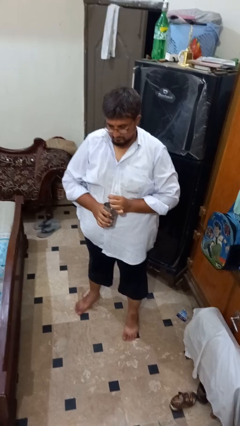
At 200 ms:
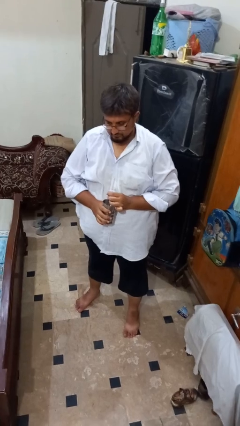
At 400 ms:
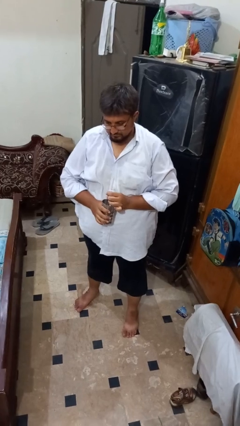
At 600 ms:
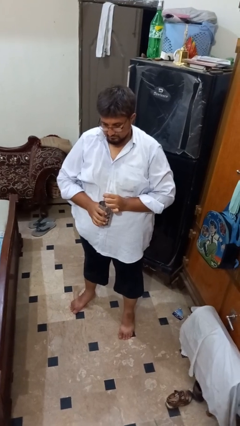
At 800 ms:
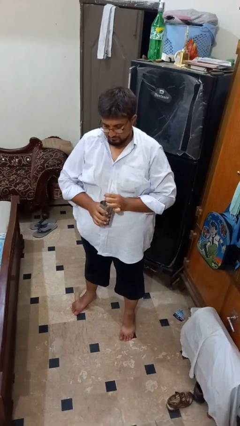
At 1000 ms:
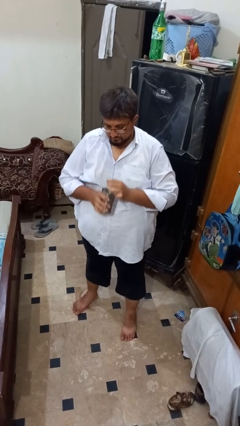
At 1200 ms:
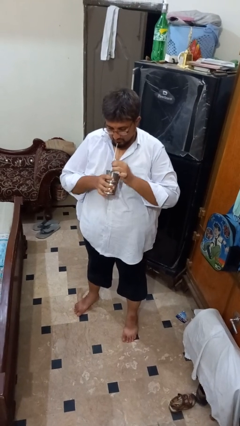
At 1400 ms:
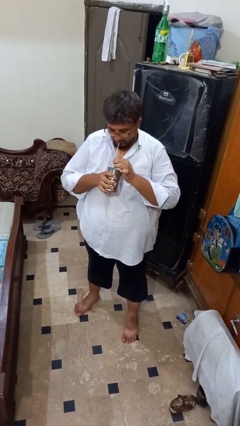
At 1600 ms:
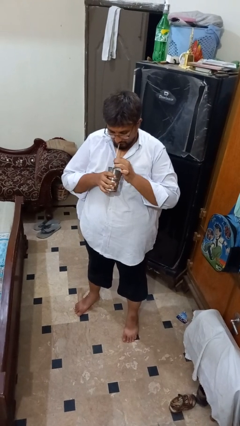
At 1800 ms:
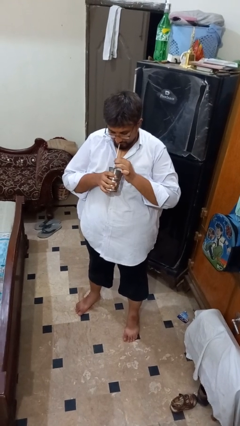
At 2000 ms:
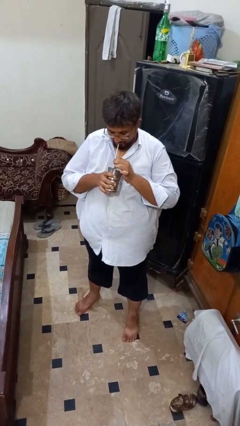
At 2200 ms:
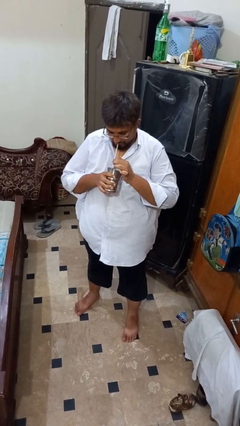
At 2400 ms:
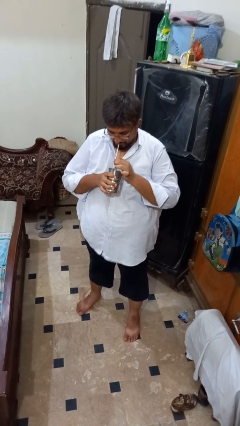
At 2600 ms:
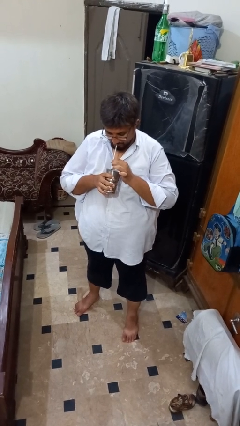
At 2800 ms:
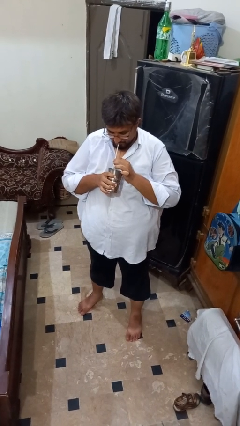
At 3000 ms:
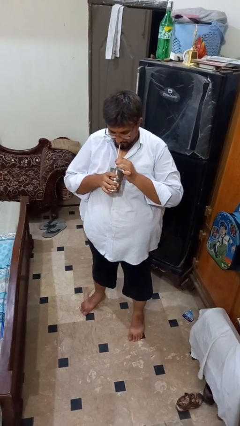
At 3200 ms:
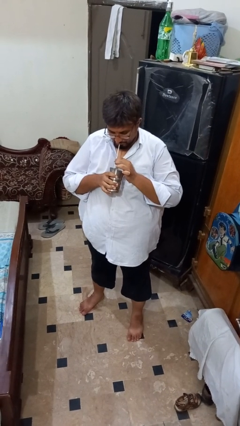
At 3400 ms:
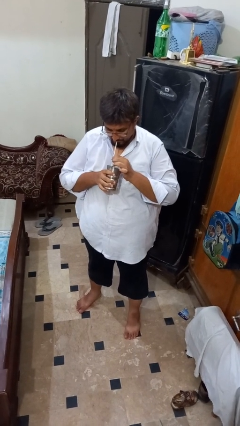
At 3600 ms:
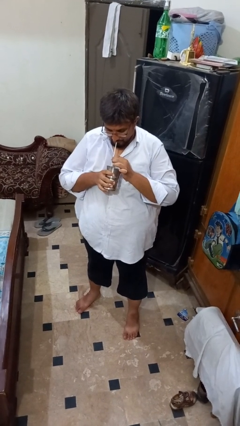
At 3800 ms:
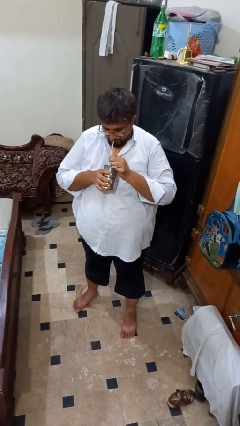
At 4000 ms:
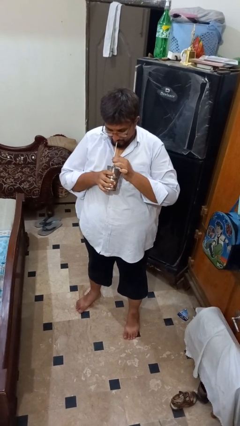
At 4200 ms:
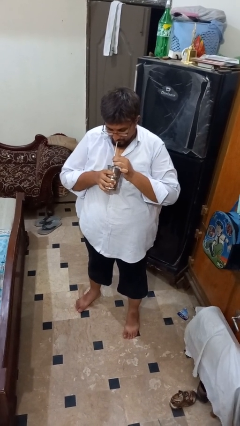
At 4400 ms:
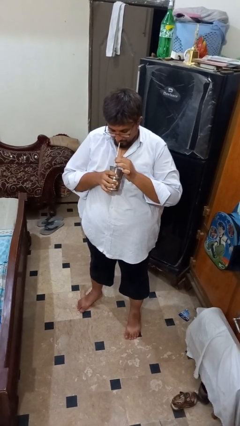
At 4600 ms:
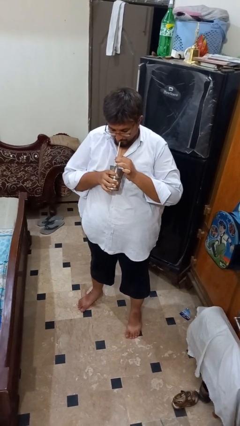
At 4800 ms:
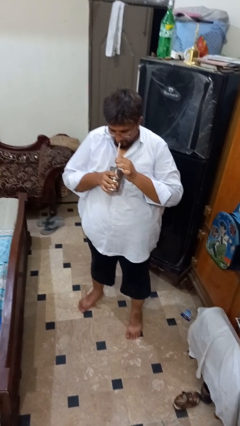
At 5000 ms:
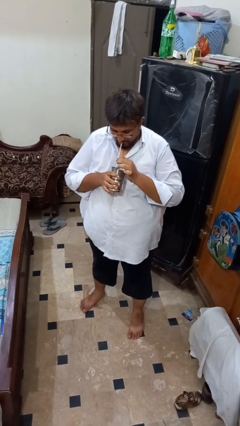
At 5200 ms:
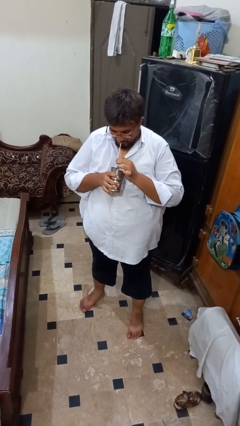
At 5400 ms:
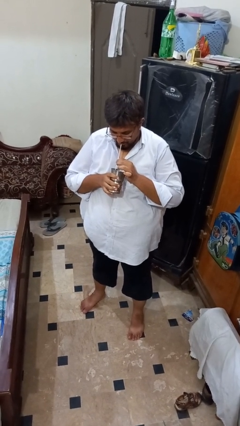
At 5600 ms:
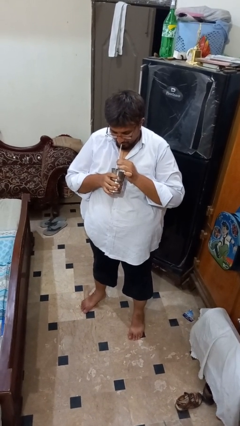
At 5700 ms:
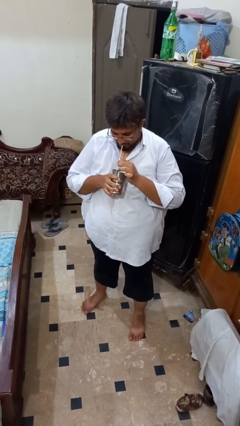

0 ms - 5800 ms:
person drinks from straw

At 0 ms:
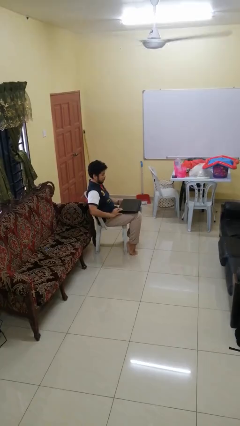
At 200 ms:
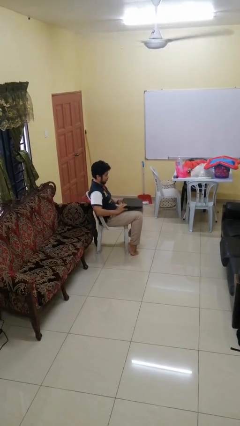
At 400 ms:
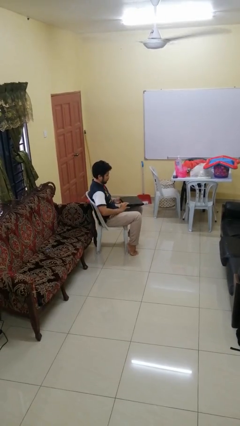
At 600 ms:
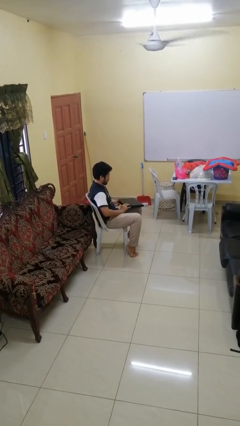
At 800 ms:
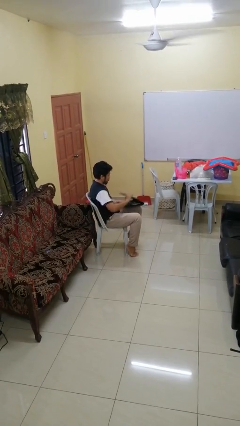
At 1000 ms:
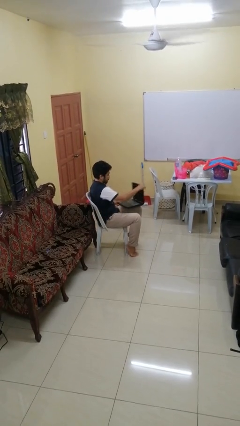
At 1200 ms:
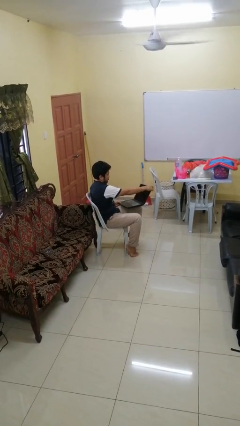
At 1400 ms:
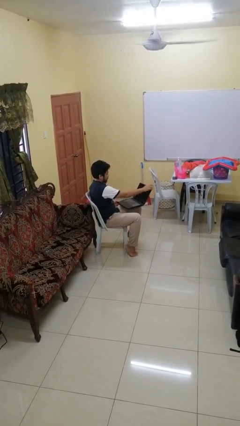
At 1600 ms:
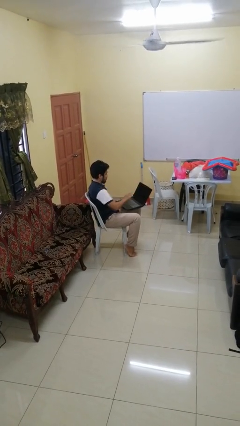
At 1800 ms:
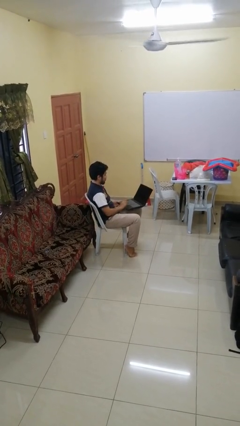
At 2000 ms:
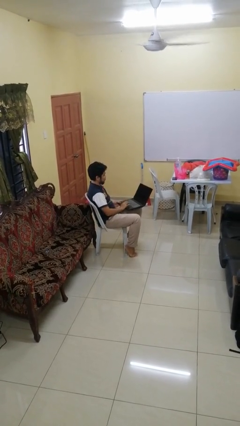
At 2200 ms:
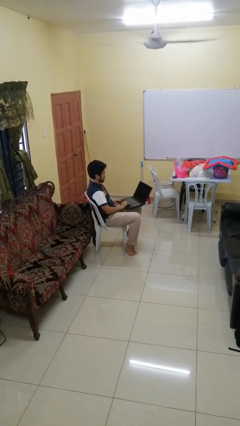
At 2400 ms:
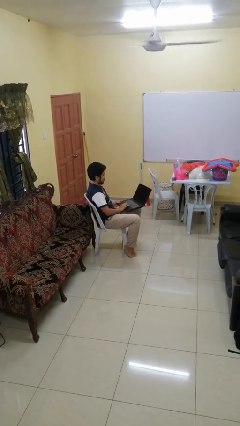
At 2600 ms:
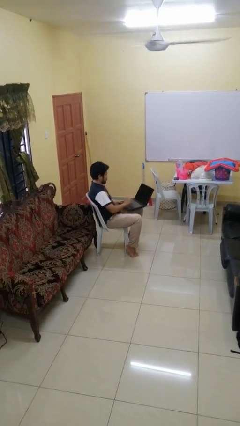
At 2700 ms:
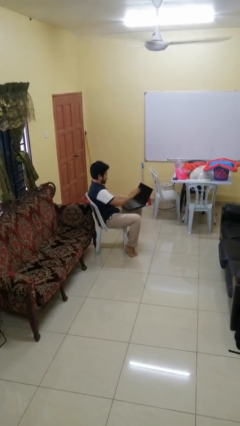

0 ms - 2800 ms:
person opens laptop

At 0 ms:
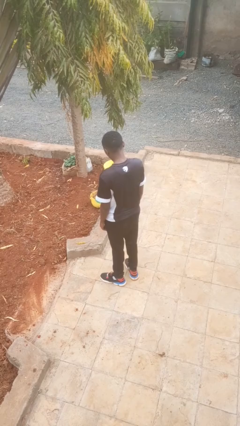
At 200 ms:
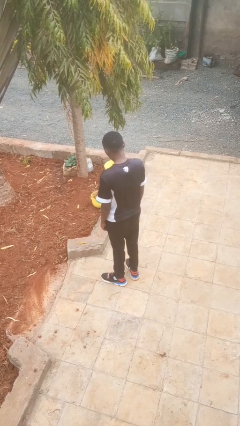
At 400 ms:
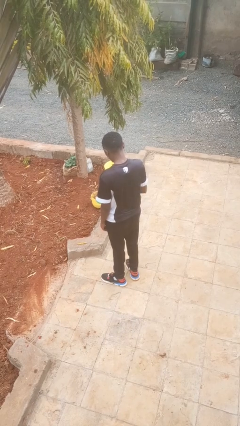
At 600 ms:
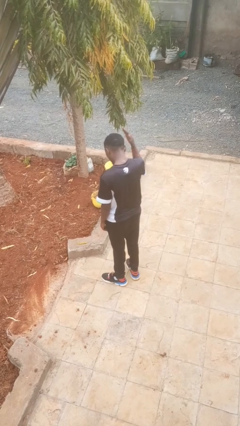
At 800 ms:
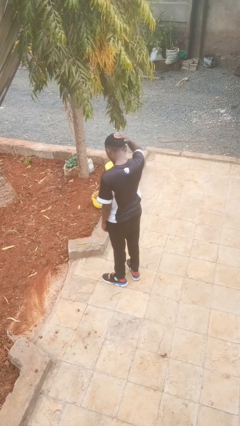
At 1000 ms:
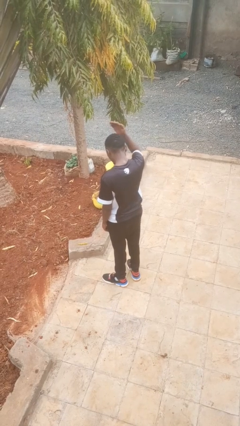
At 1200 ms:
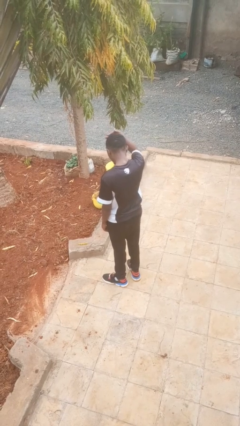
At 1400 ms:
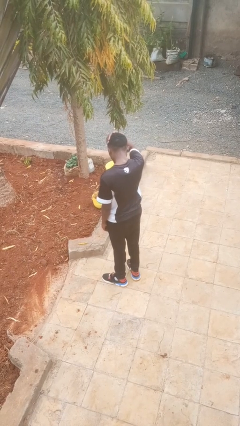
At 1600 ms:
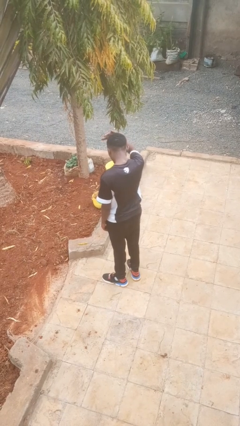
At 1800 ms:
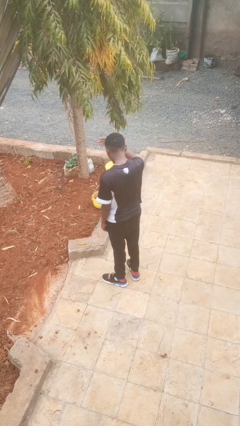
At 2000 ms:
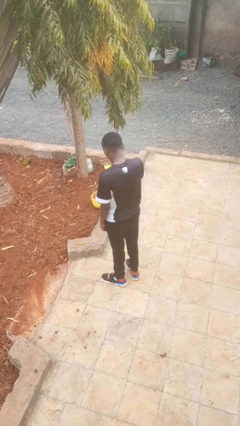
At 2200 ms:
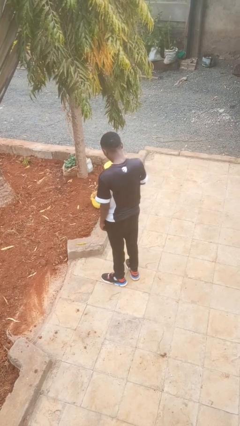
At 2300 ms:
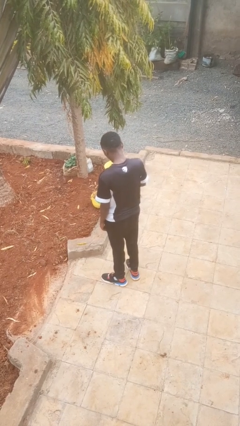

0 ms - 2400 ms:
person pats head

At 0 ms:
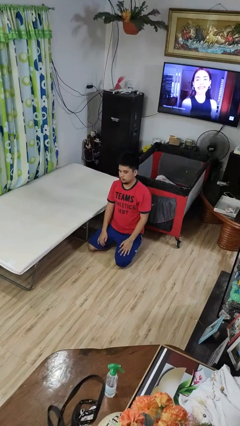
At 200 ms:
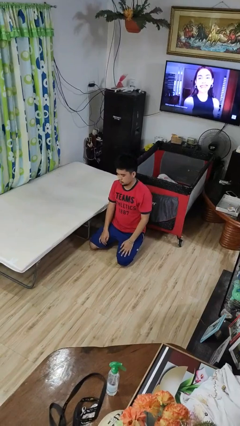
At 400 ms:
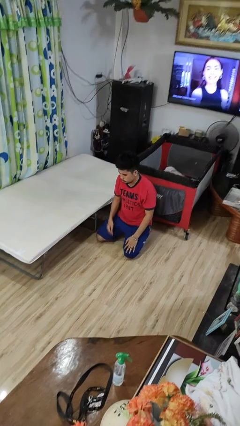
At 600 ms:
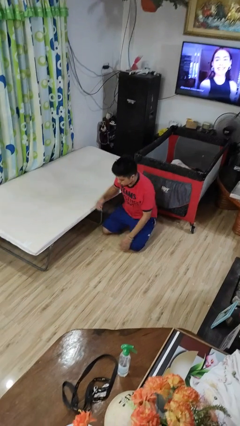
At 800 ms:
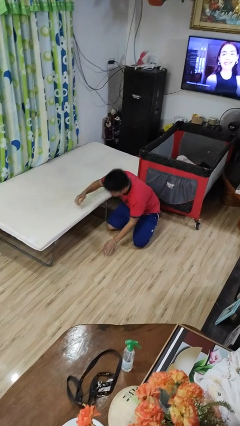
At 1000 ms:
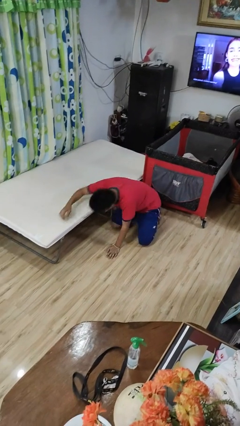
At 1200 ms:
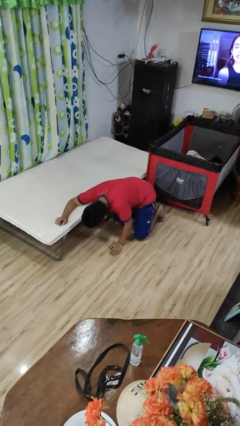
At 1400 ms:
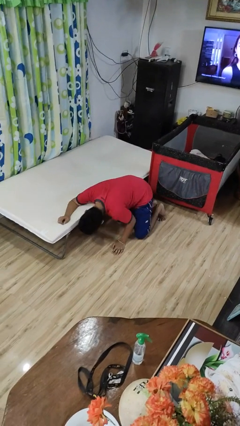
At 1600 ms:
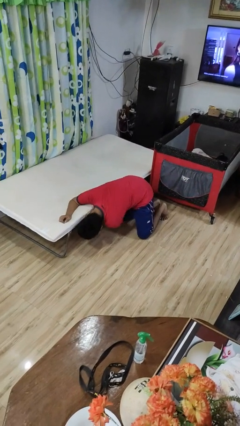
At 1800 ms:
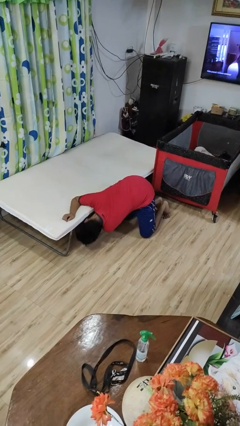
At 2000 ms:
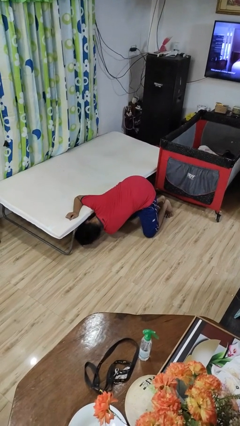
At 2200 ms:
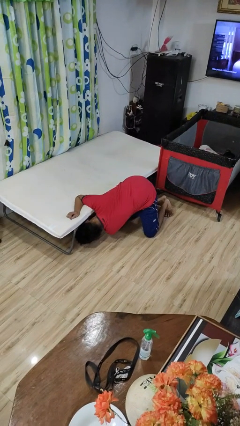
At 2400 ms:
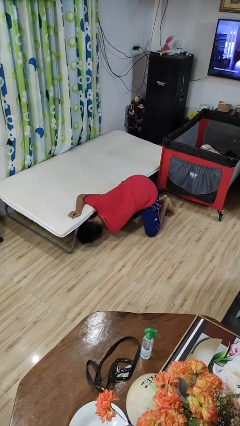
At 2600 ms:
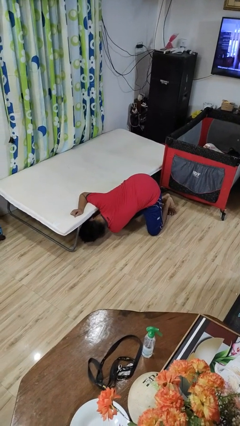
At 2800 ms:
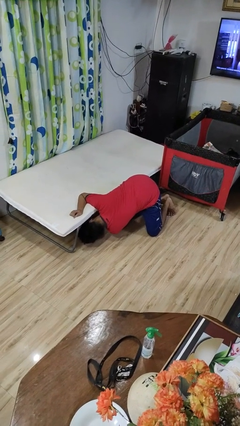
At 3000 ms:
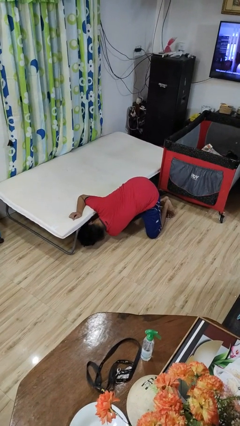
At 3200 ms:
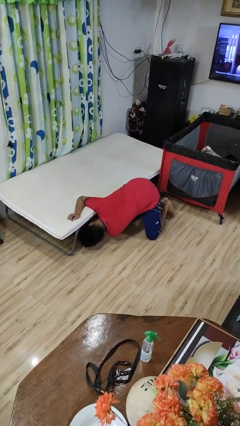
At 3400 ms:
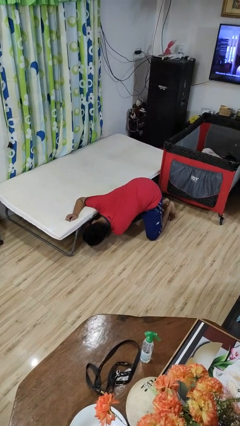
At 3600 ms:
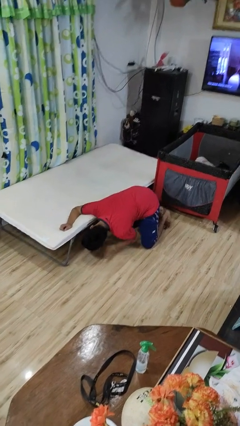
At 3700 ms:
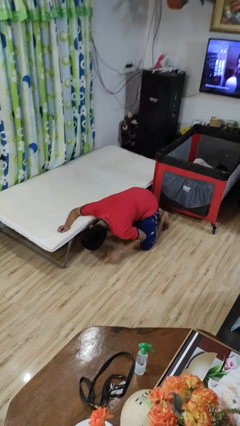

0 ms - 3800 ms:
person searches under bed

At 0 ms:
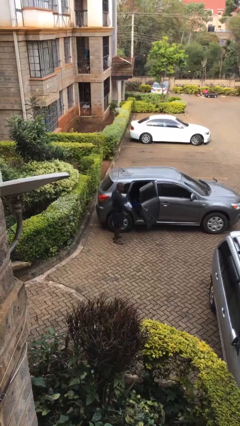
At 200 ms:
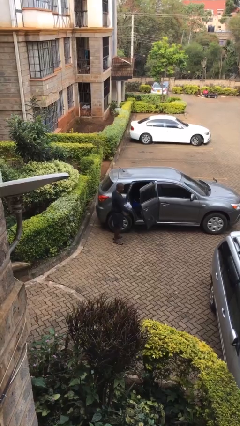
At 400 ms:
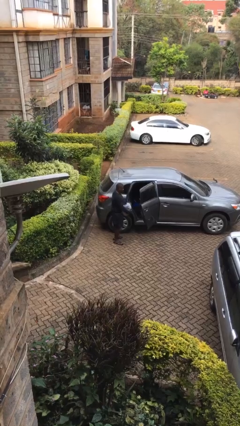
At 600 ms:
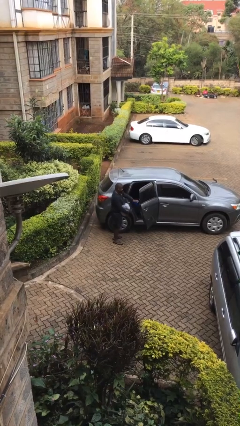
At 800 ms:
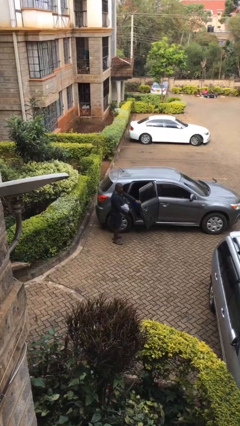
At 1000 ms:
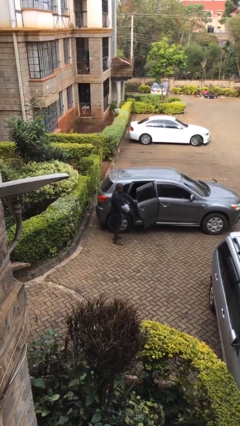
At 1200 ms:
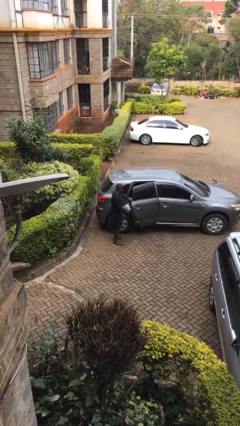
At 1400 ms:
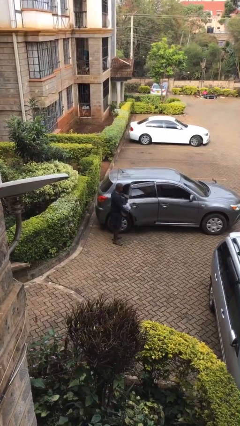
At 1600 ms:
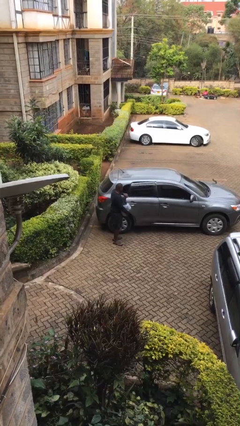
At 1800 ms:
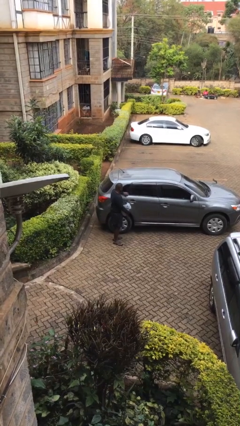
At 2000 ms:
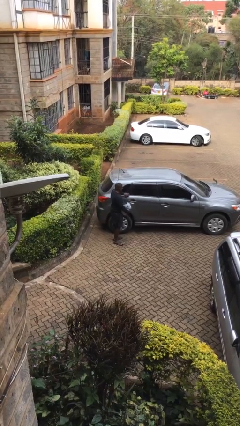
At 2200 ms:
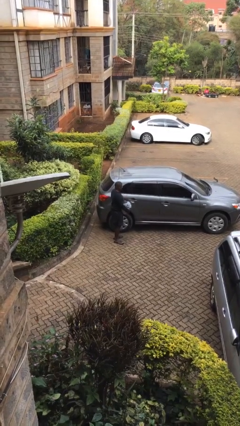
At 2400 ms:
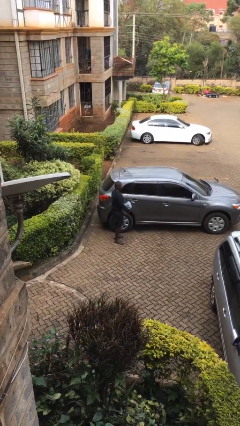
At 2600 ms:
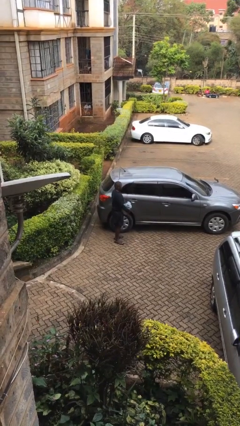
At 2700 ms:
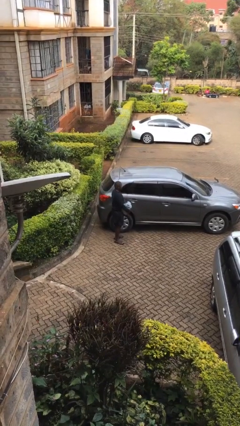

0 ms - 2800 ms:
person closes car door

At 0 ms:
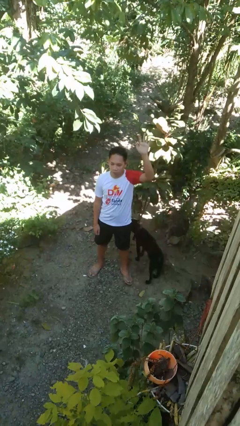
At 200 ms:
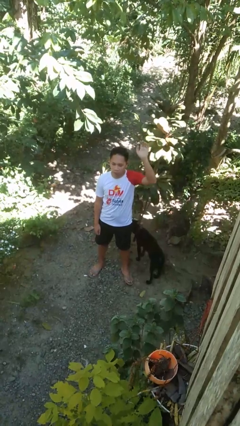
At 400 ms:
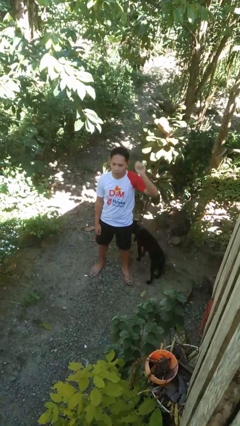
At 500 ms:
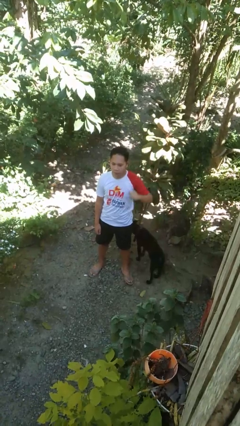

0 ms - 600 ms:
person gestures lower hand
